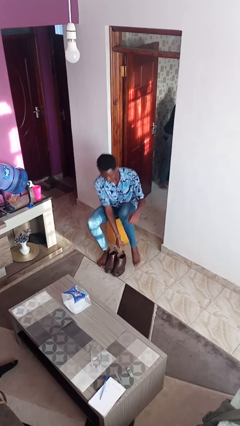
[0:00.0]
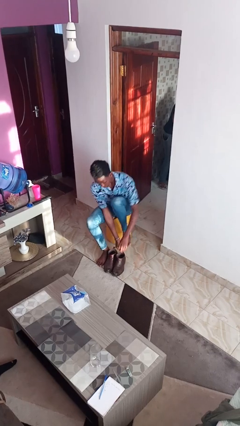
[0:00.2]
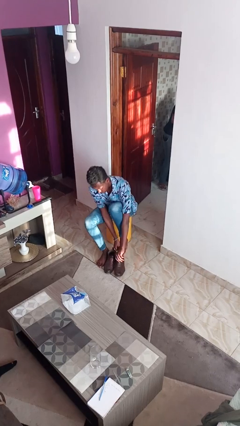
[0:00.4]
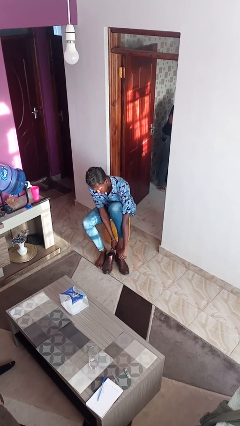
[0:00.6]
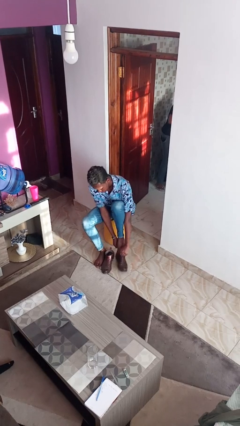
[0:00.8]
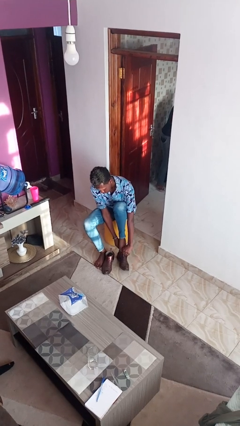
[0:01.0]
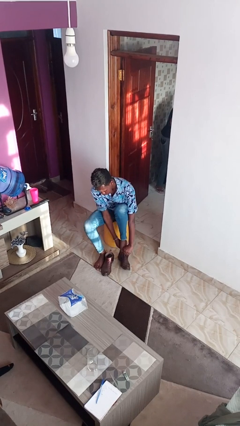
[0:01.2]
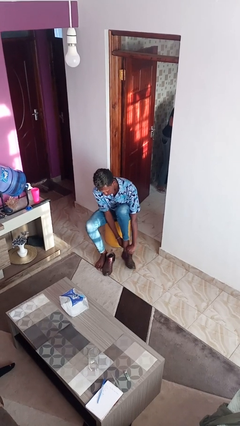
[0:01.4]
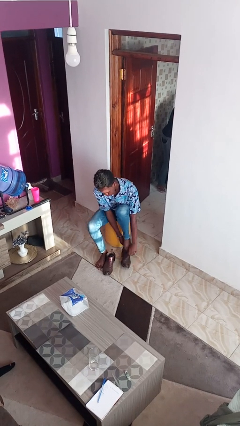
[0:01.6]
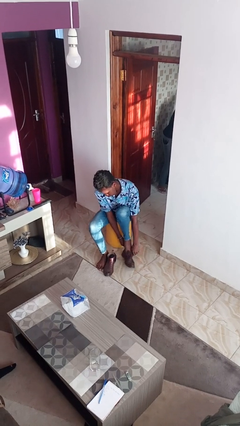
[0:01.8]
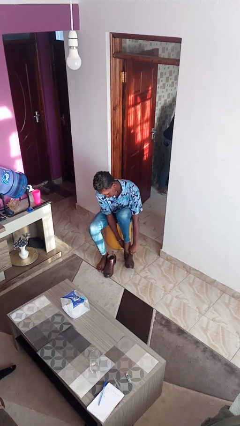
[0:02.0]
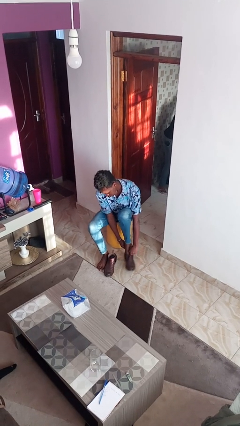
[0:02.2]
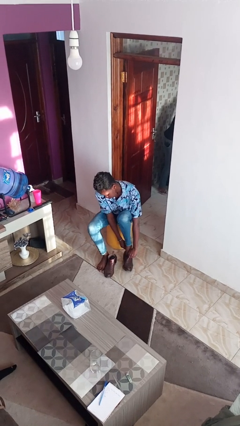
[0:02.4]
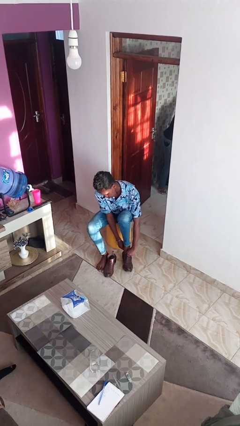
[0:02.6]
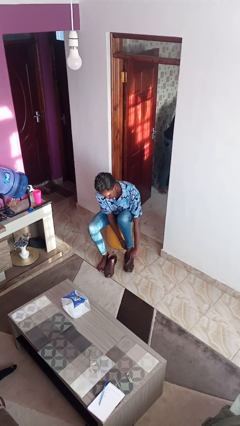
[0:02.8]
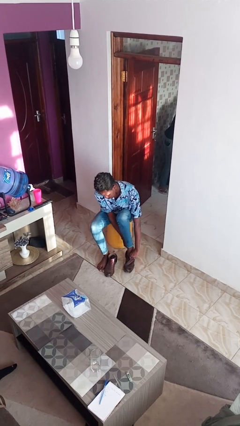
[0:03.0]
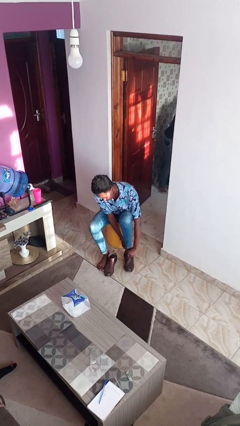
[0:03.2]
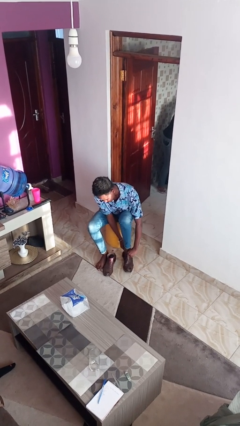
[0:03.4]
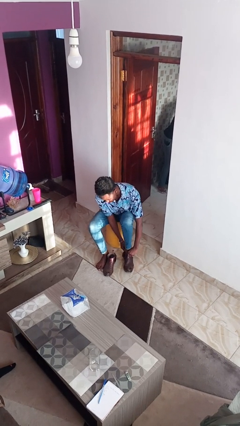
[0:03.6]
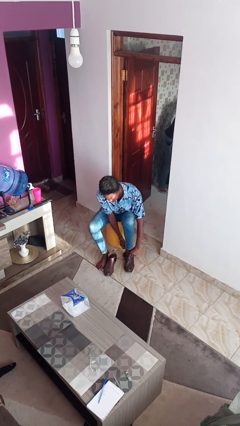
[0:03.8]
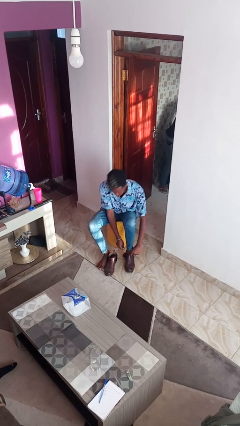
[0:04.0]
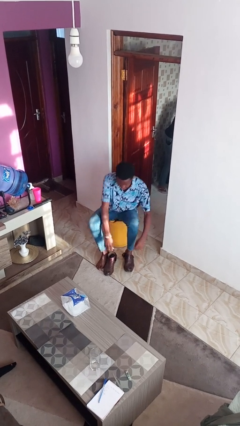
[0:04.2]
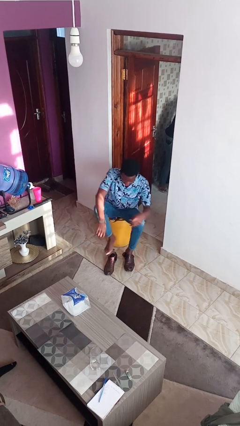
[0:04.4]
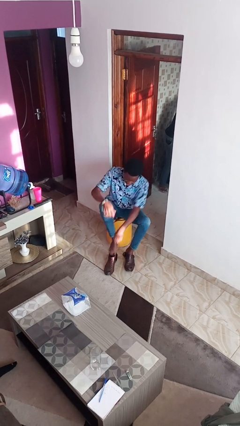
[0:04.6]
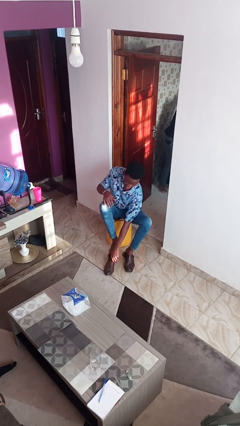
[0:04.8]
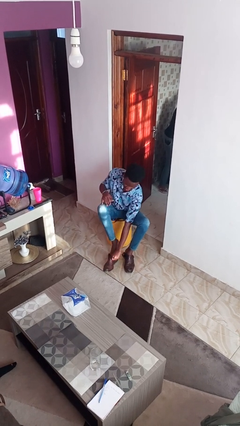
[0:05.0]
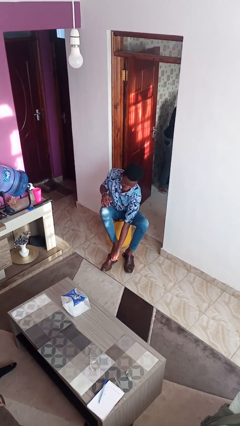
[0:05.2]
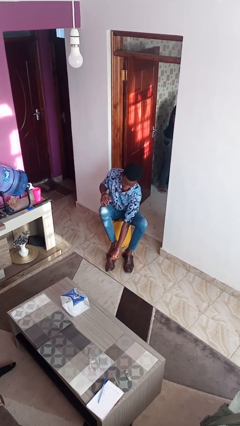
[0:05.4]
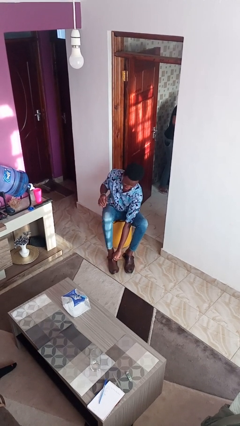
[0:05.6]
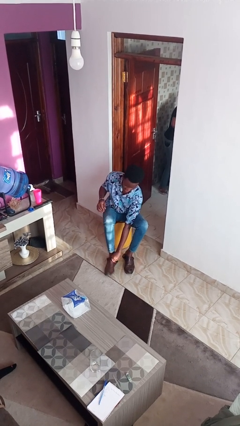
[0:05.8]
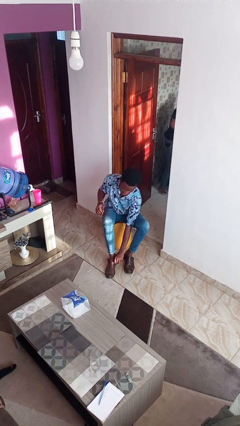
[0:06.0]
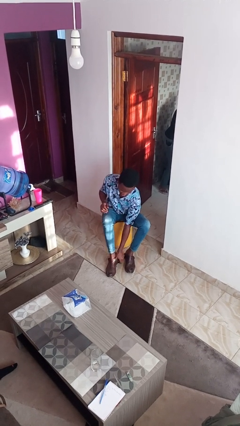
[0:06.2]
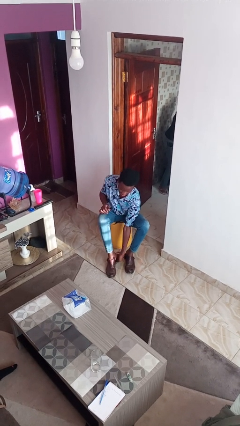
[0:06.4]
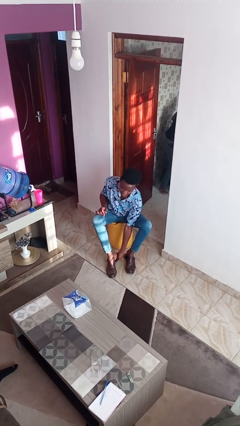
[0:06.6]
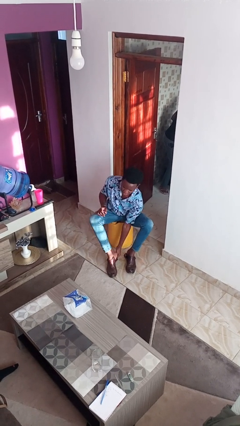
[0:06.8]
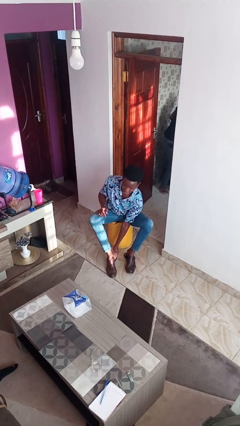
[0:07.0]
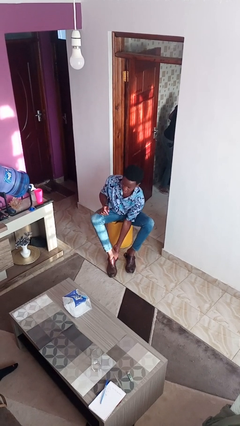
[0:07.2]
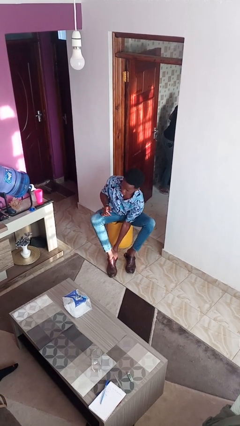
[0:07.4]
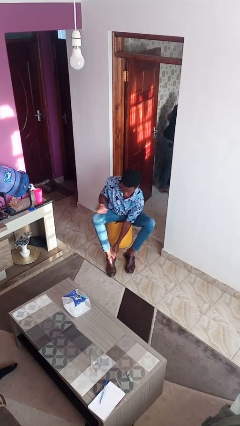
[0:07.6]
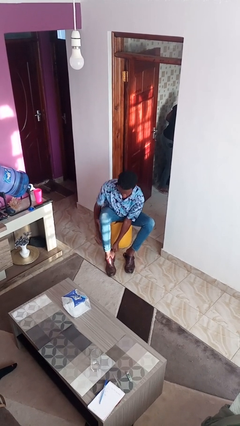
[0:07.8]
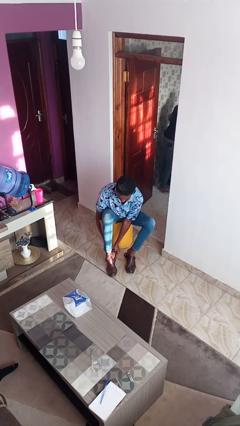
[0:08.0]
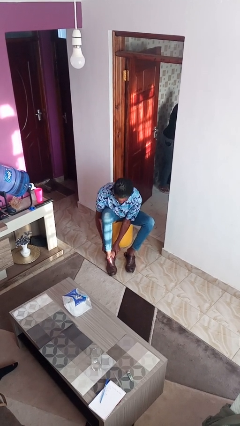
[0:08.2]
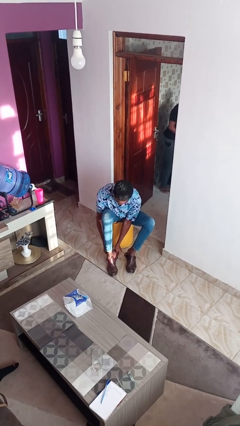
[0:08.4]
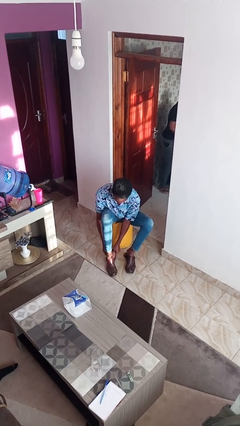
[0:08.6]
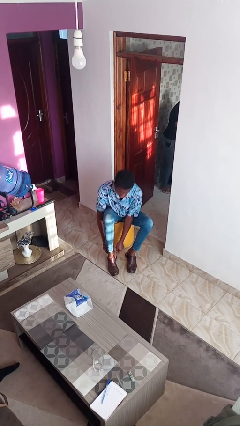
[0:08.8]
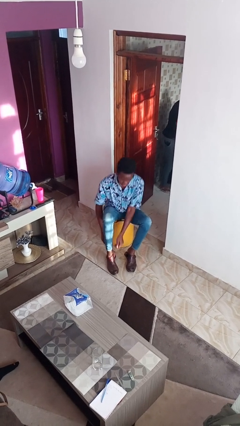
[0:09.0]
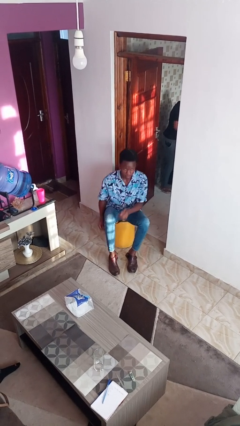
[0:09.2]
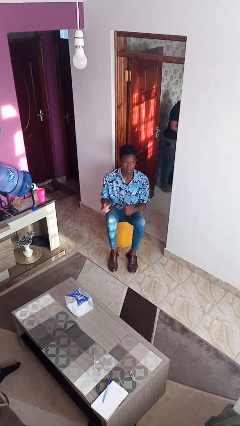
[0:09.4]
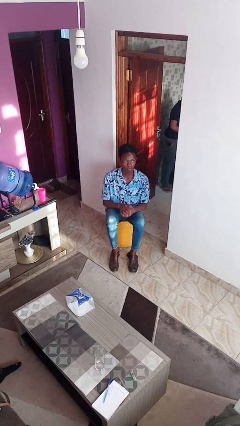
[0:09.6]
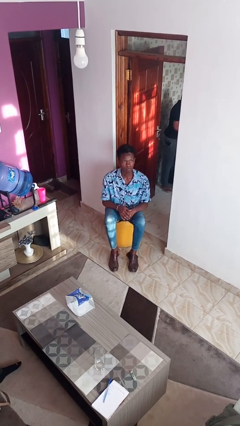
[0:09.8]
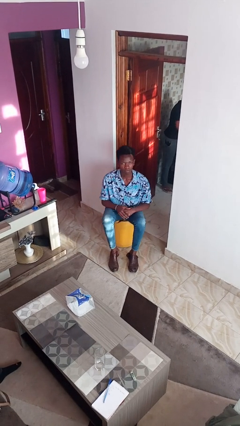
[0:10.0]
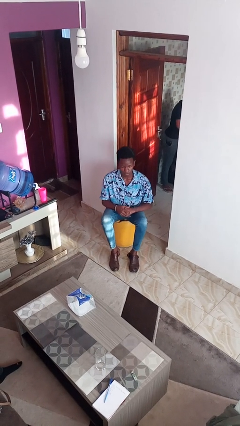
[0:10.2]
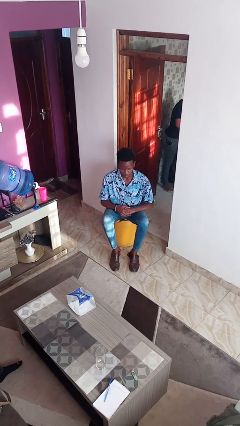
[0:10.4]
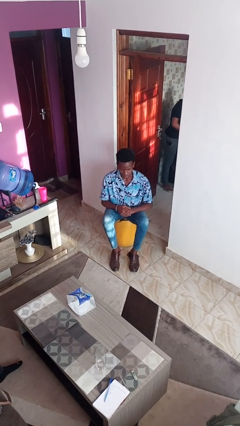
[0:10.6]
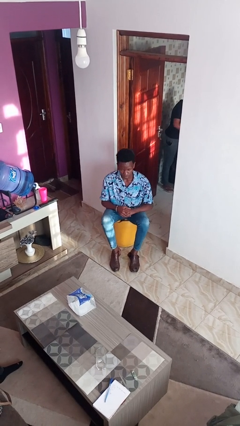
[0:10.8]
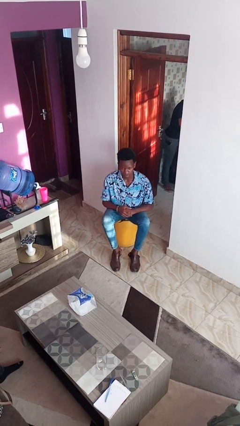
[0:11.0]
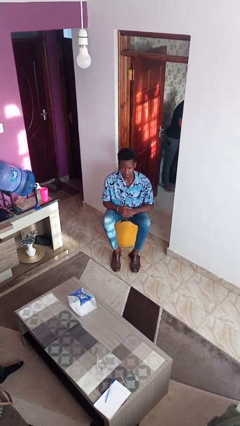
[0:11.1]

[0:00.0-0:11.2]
person puts on boots

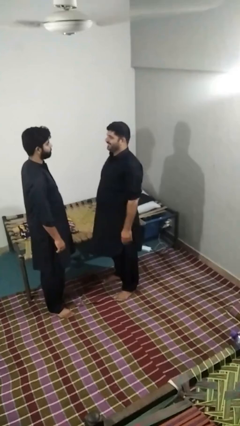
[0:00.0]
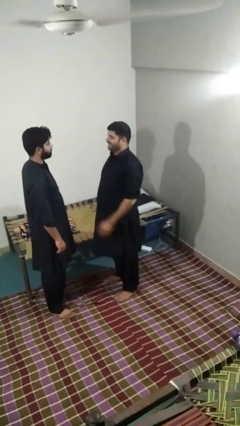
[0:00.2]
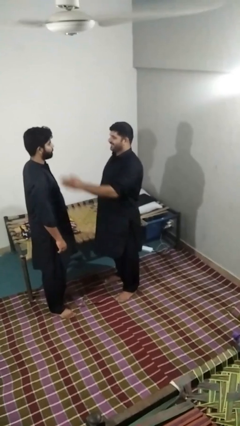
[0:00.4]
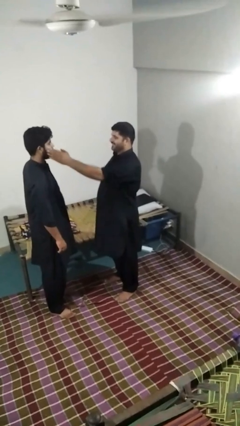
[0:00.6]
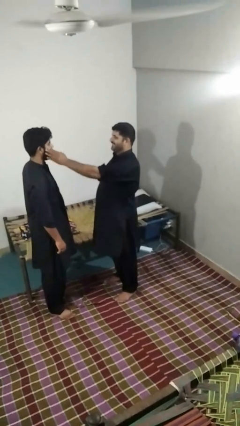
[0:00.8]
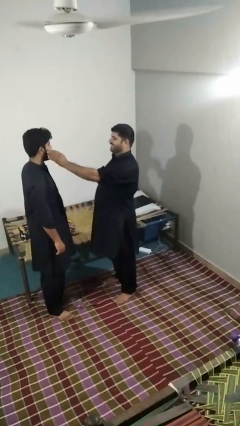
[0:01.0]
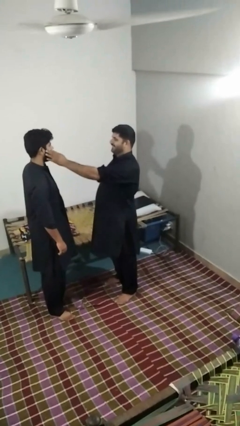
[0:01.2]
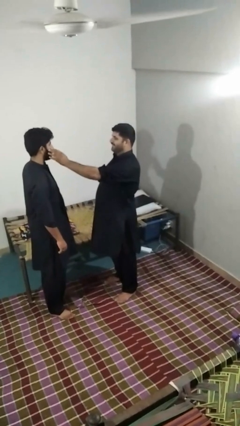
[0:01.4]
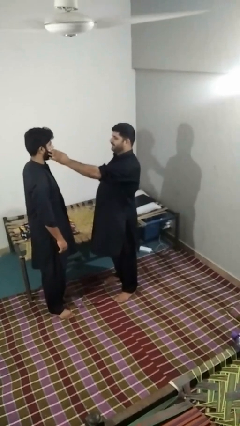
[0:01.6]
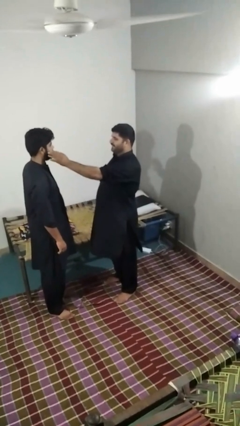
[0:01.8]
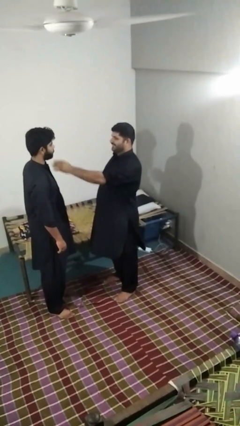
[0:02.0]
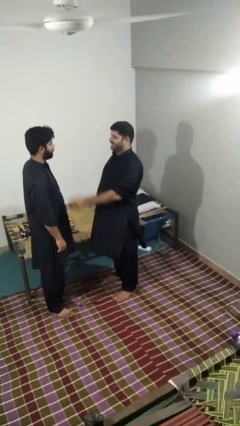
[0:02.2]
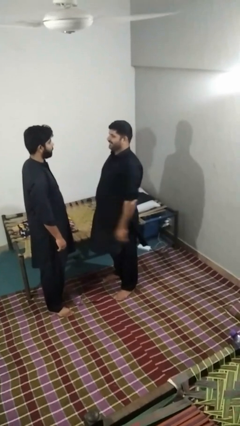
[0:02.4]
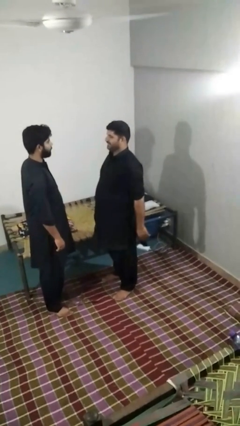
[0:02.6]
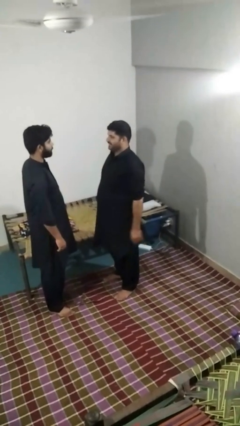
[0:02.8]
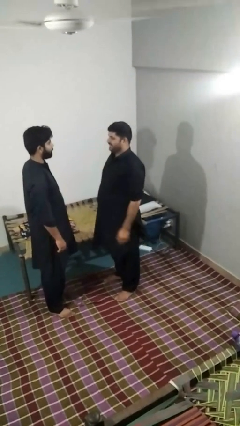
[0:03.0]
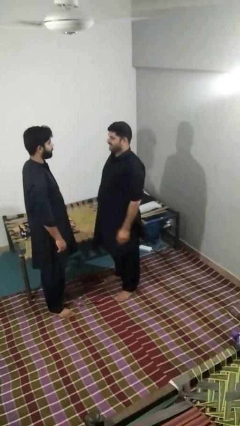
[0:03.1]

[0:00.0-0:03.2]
person touches face of person

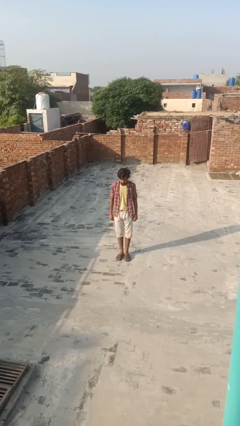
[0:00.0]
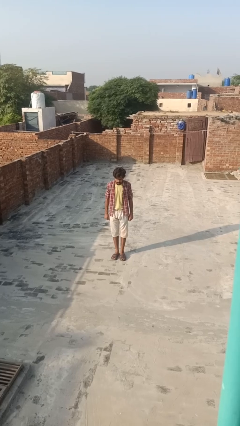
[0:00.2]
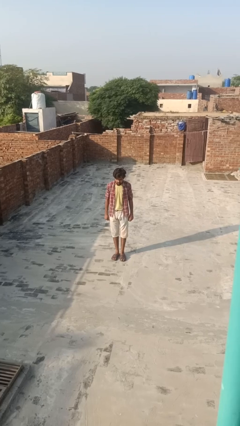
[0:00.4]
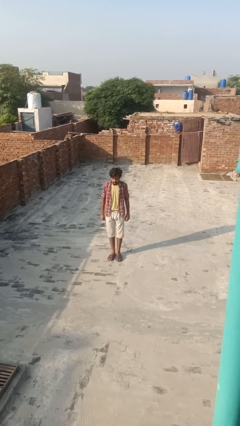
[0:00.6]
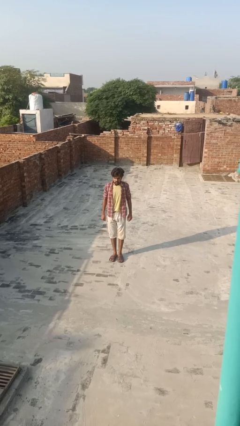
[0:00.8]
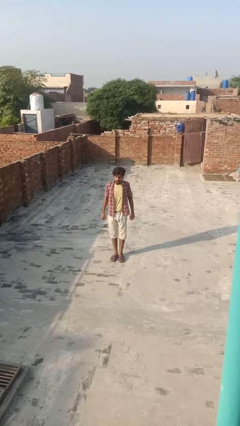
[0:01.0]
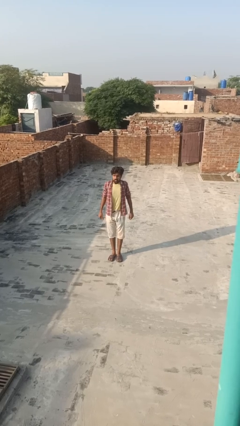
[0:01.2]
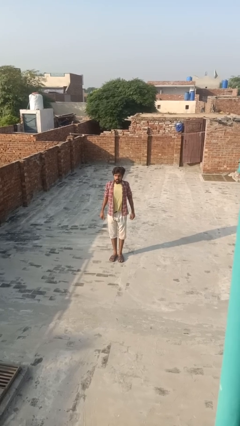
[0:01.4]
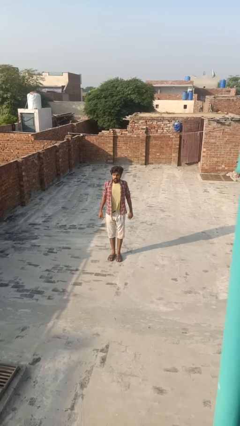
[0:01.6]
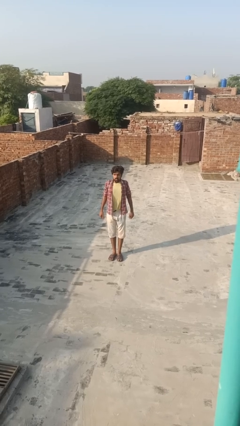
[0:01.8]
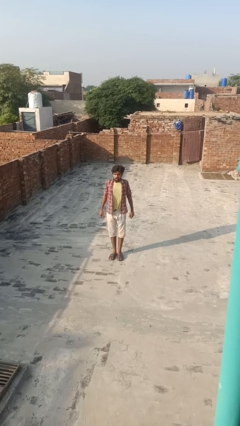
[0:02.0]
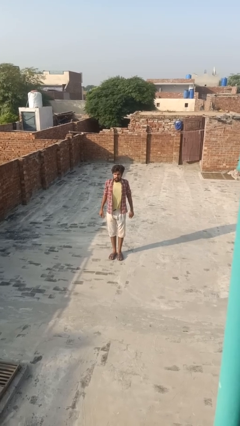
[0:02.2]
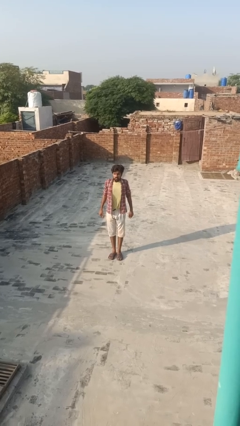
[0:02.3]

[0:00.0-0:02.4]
person exercises with lunges

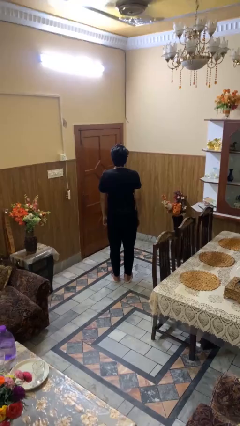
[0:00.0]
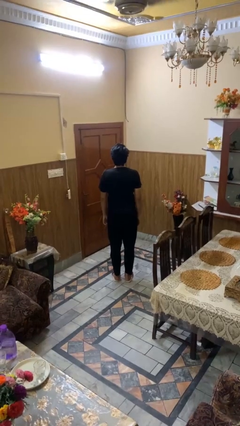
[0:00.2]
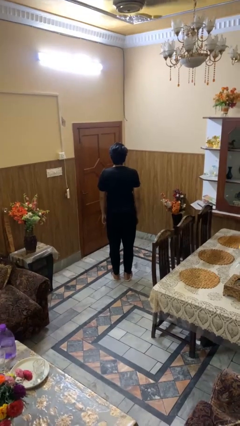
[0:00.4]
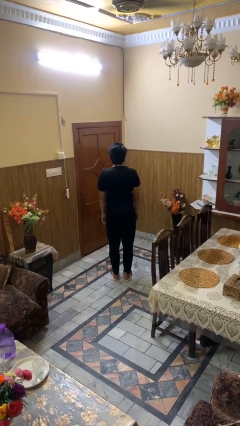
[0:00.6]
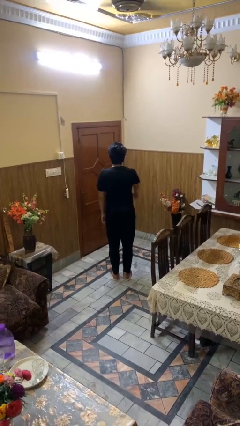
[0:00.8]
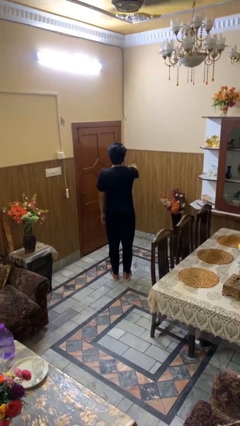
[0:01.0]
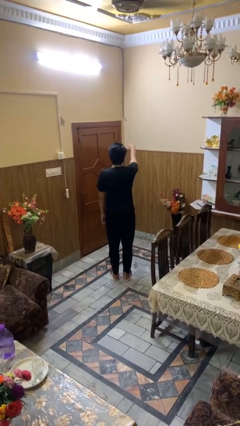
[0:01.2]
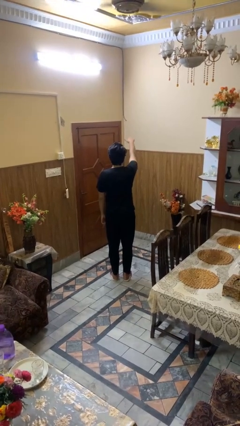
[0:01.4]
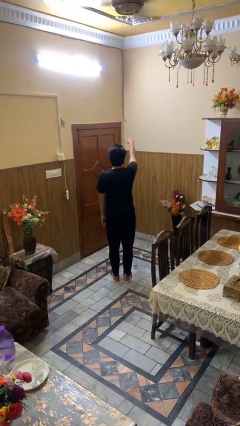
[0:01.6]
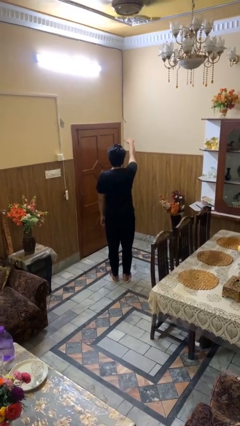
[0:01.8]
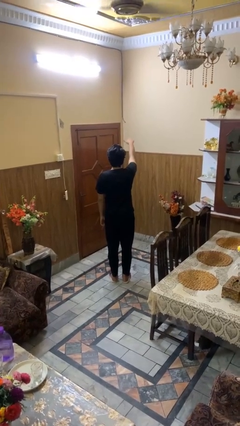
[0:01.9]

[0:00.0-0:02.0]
person gestures swipe up
